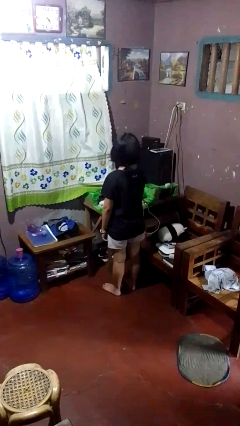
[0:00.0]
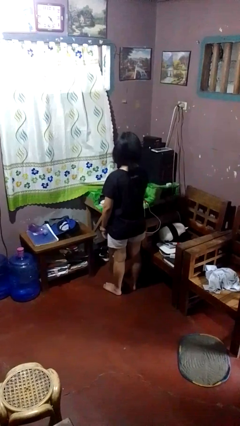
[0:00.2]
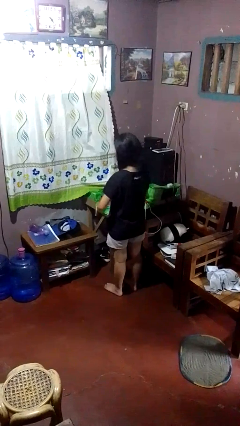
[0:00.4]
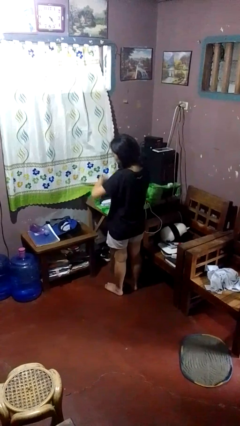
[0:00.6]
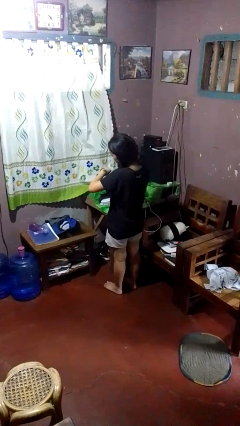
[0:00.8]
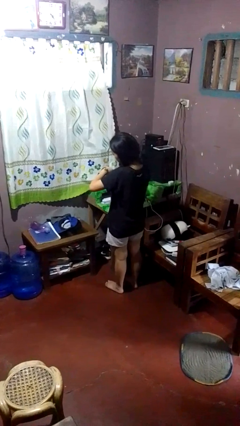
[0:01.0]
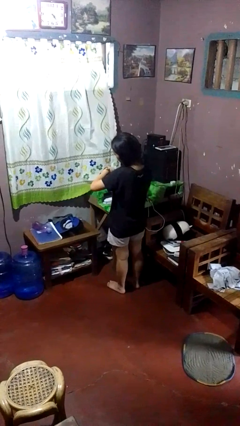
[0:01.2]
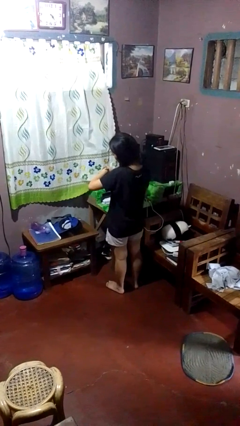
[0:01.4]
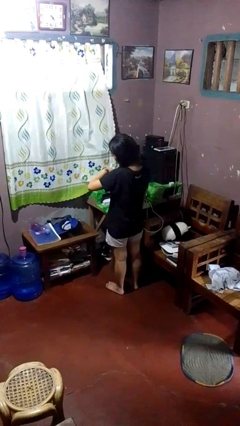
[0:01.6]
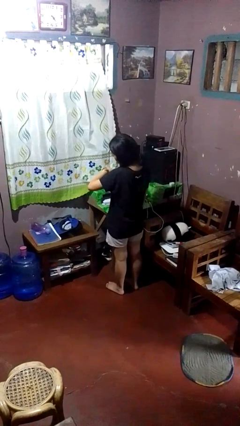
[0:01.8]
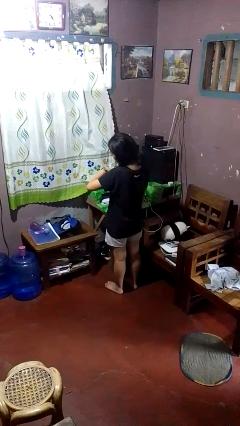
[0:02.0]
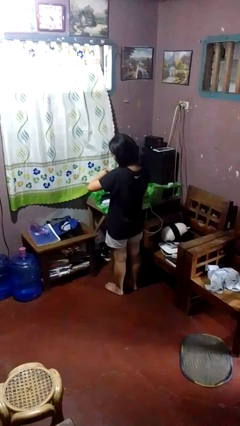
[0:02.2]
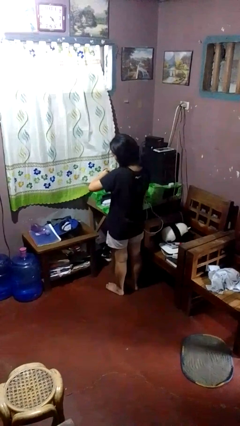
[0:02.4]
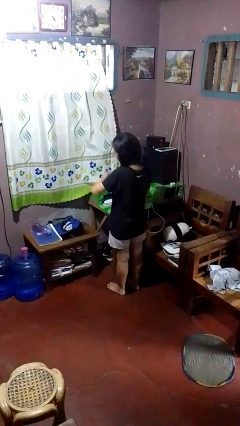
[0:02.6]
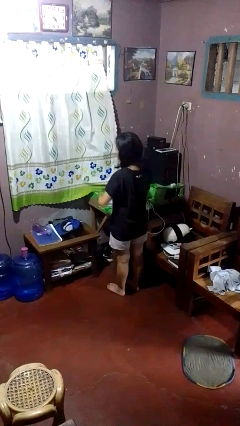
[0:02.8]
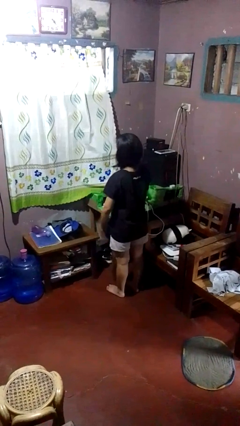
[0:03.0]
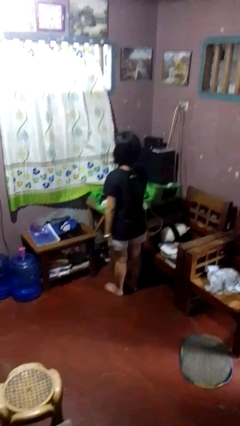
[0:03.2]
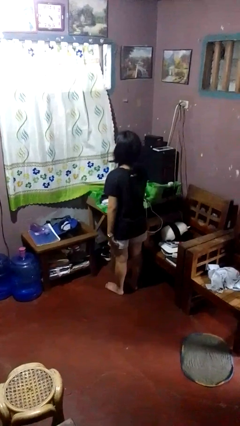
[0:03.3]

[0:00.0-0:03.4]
person looks at wristwatch

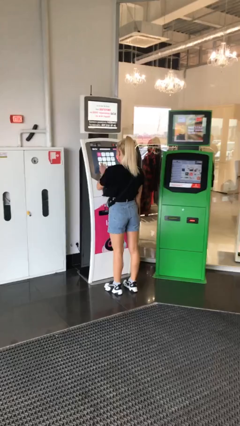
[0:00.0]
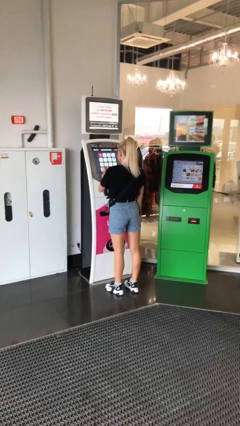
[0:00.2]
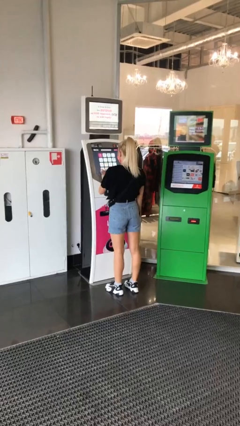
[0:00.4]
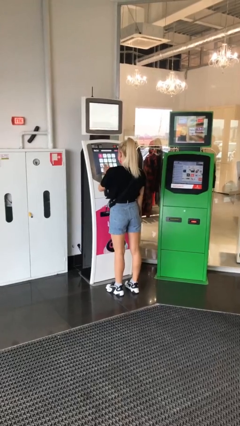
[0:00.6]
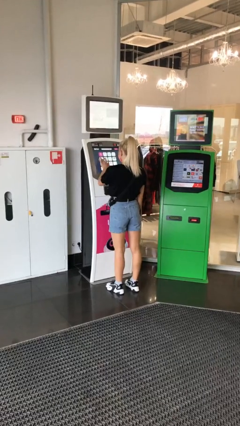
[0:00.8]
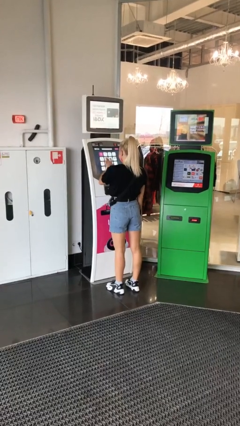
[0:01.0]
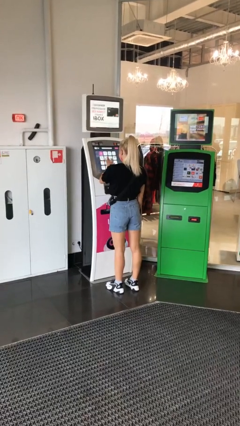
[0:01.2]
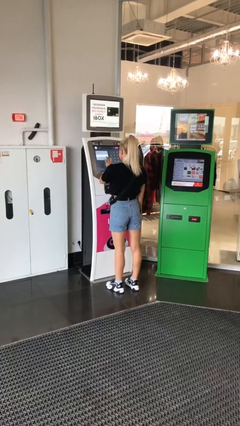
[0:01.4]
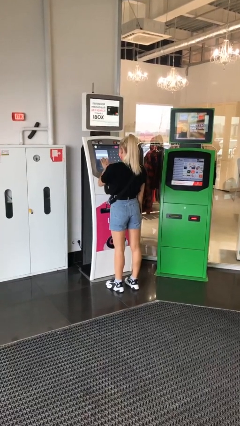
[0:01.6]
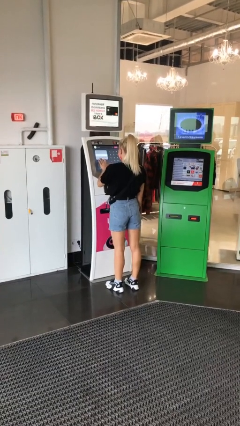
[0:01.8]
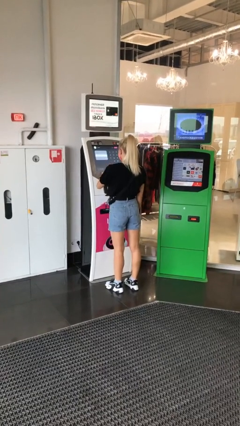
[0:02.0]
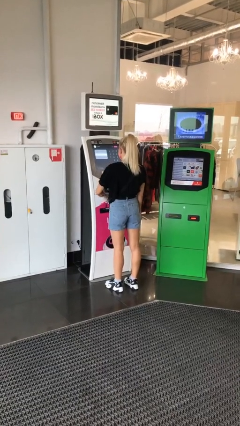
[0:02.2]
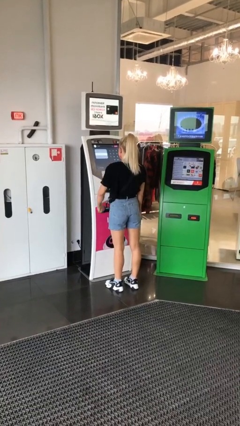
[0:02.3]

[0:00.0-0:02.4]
person purchases from machine

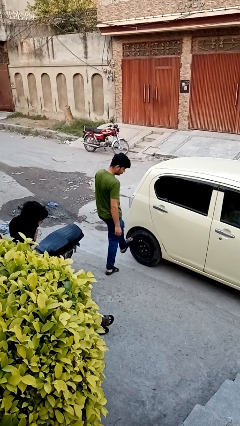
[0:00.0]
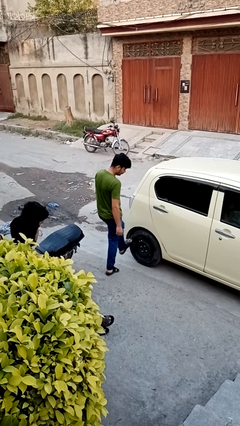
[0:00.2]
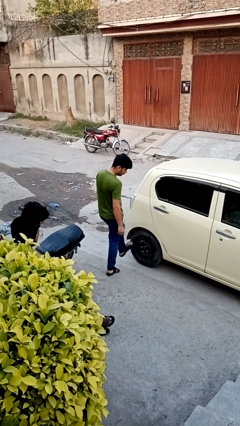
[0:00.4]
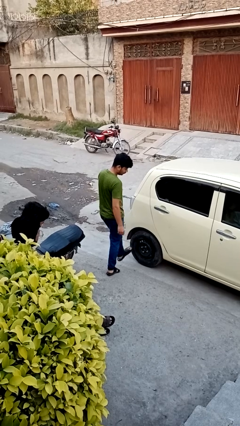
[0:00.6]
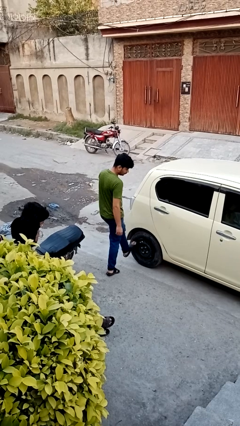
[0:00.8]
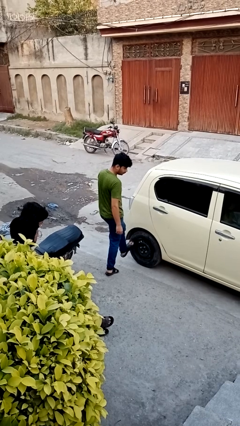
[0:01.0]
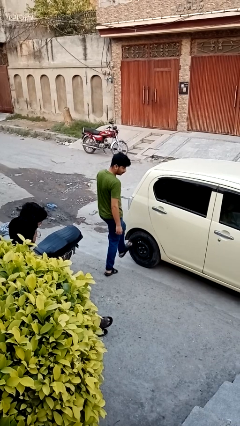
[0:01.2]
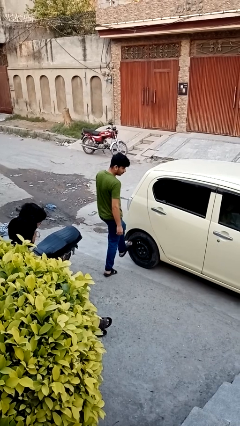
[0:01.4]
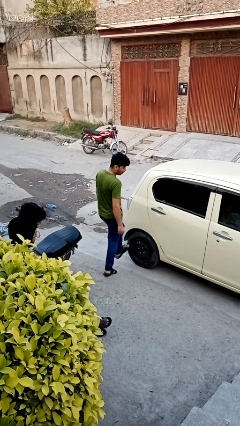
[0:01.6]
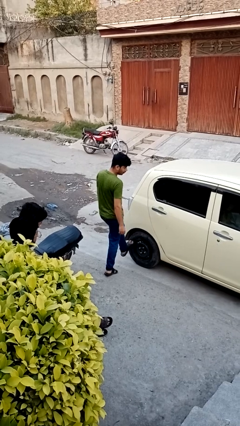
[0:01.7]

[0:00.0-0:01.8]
person kicks car tires

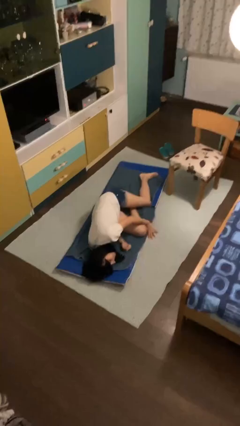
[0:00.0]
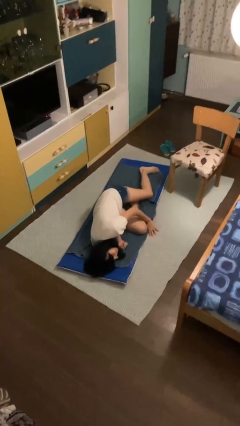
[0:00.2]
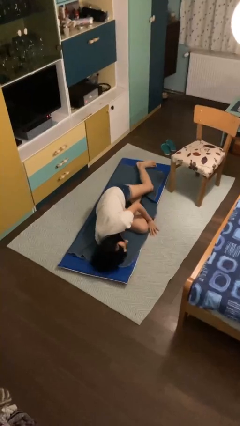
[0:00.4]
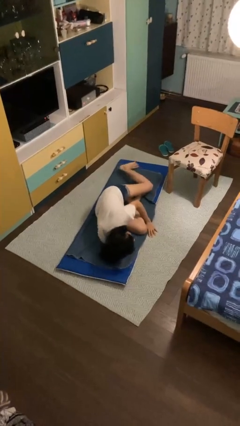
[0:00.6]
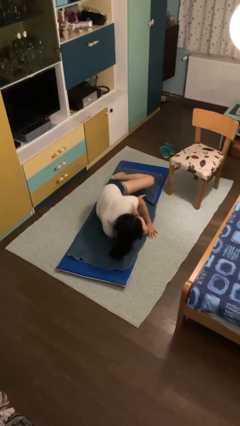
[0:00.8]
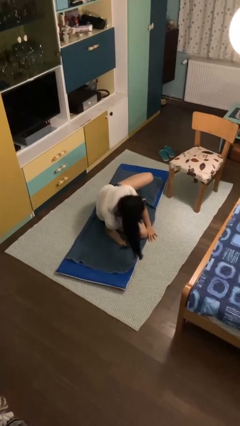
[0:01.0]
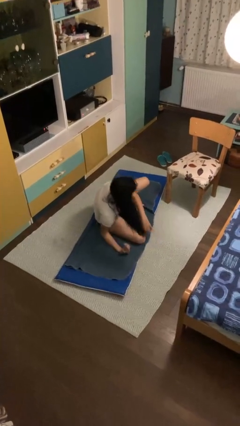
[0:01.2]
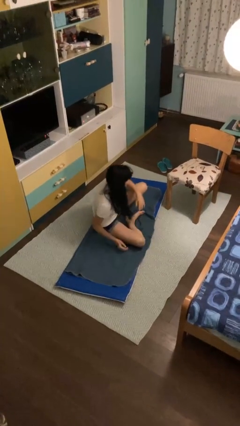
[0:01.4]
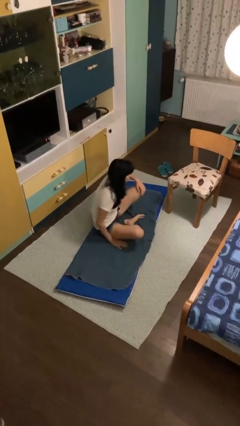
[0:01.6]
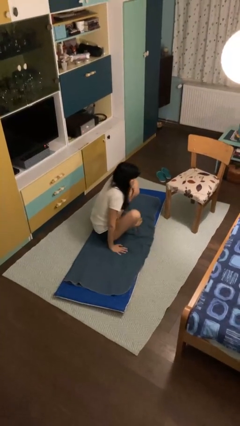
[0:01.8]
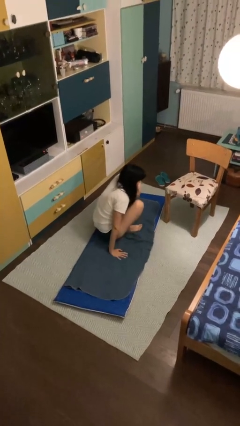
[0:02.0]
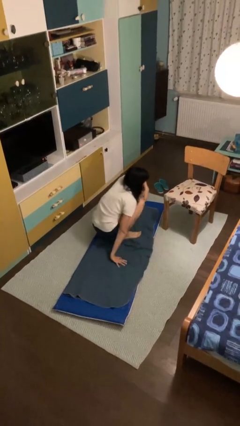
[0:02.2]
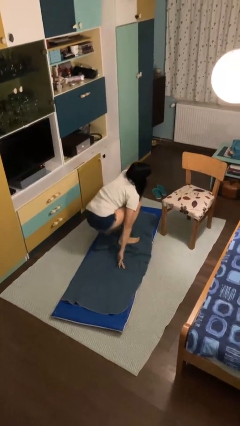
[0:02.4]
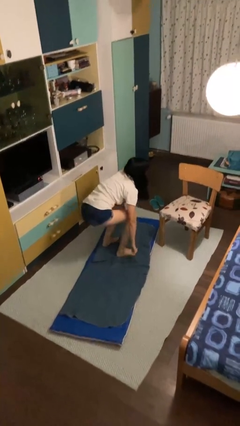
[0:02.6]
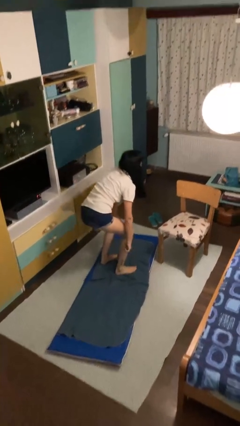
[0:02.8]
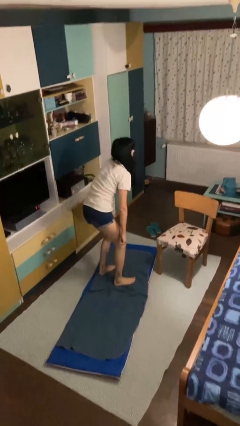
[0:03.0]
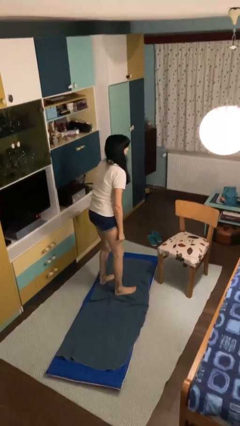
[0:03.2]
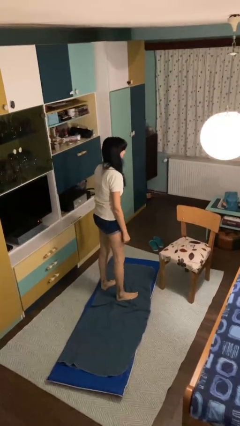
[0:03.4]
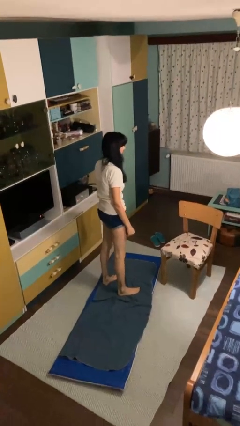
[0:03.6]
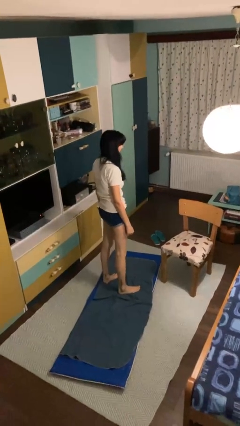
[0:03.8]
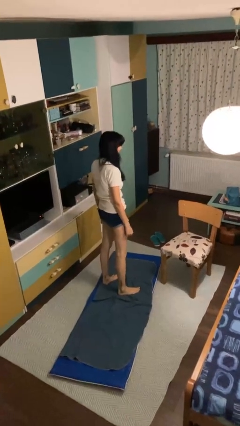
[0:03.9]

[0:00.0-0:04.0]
person stands up from floor

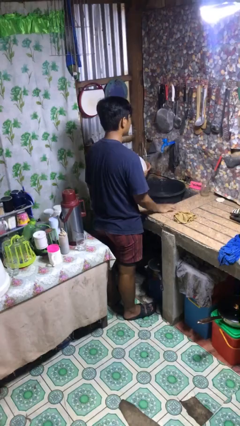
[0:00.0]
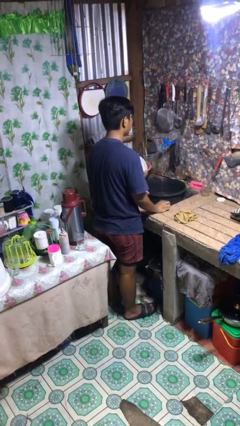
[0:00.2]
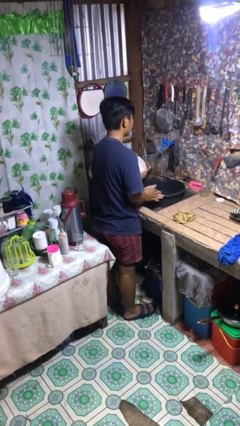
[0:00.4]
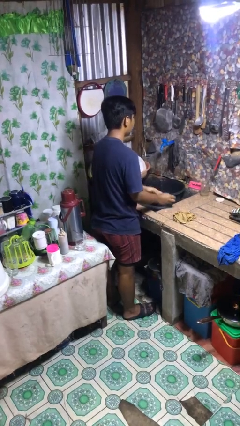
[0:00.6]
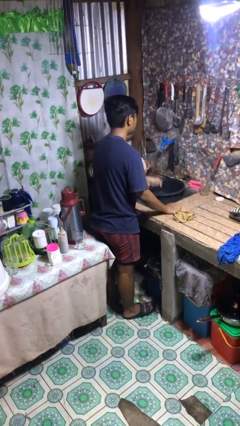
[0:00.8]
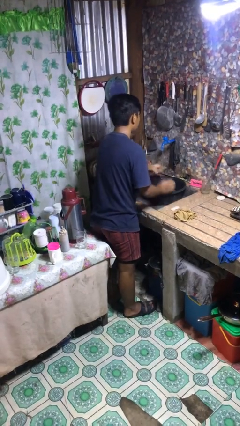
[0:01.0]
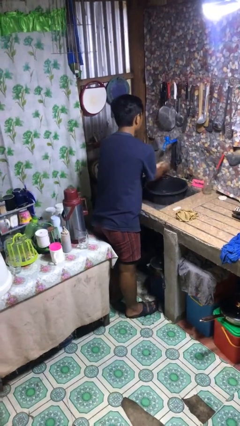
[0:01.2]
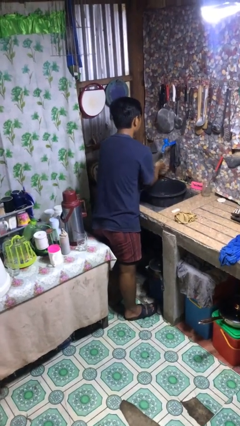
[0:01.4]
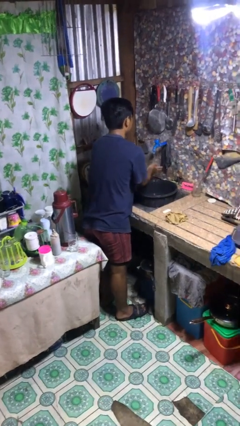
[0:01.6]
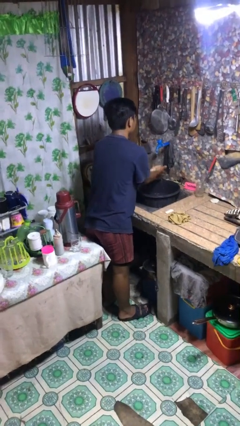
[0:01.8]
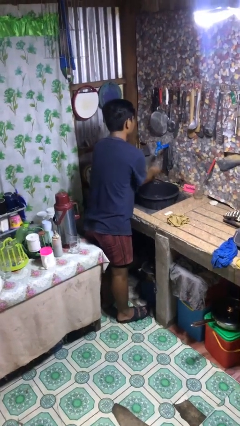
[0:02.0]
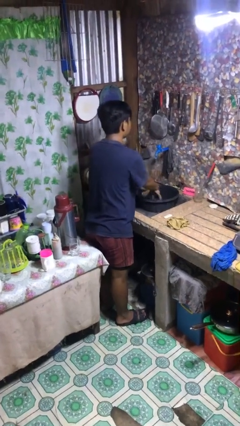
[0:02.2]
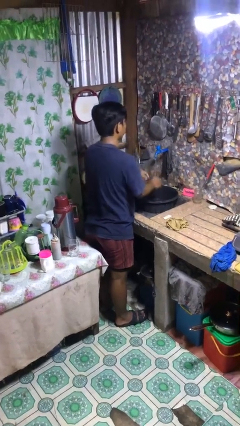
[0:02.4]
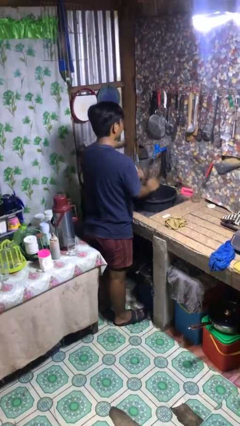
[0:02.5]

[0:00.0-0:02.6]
person washes hands

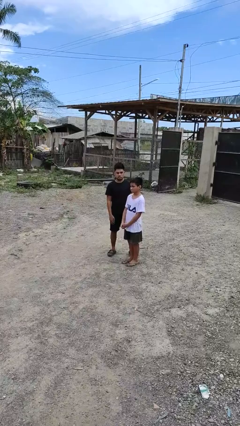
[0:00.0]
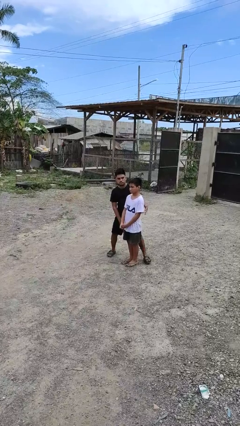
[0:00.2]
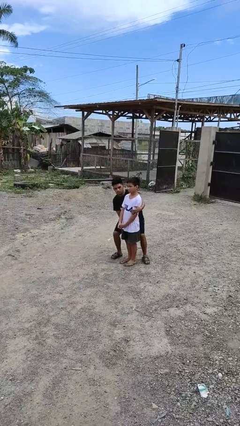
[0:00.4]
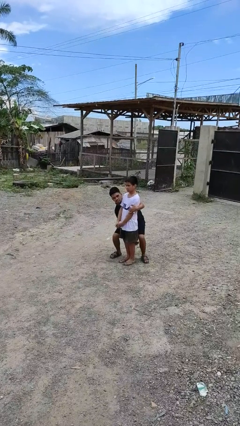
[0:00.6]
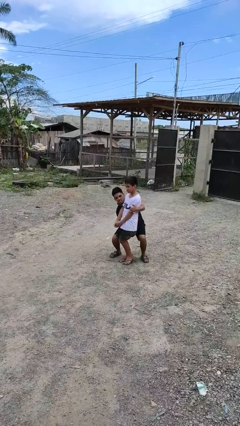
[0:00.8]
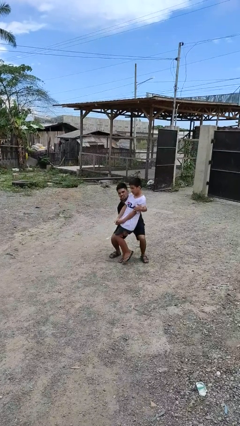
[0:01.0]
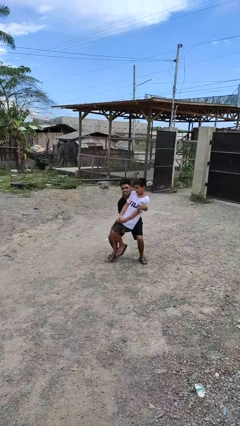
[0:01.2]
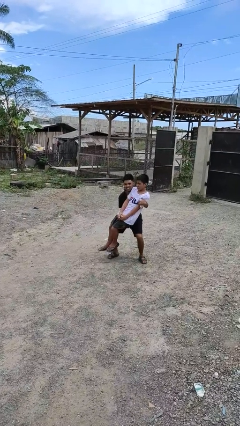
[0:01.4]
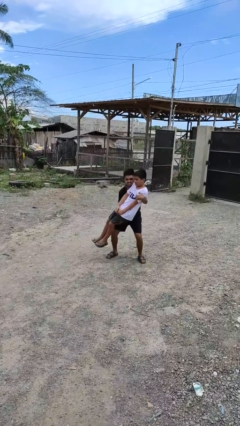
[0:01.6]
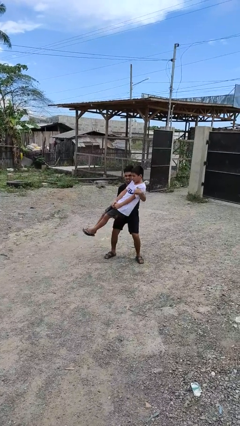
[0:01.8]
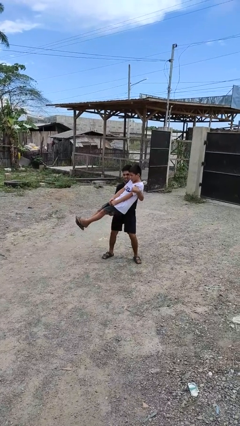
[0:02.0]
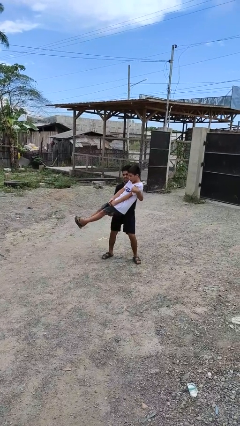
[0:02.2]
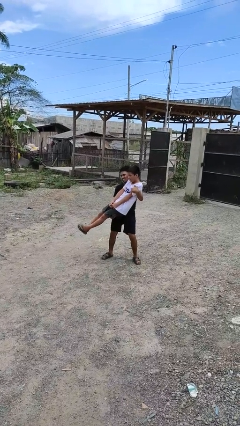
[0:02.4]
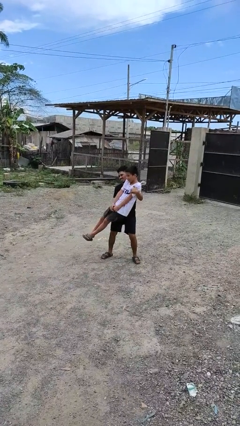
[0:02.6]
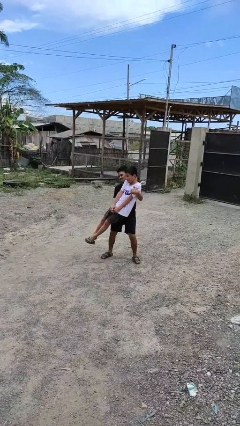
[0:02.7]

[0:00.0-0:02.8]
person picks up person
